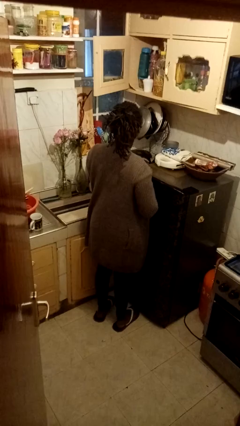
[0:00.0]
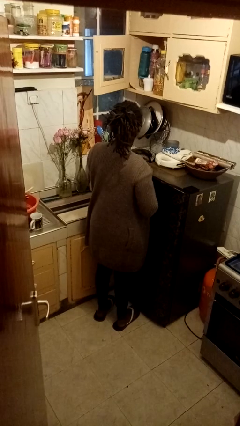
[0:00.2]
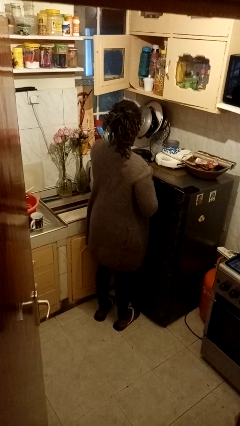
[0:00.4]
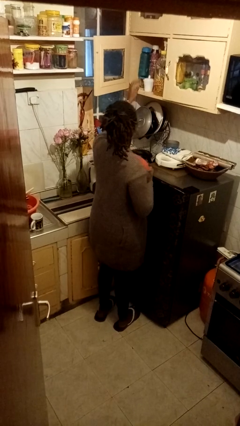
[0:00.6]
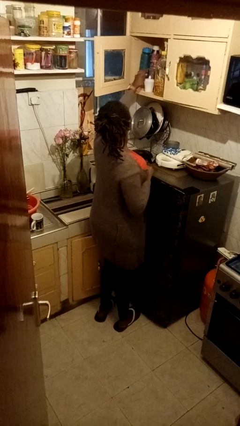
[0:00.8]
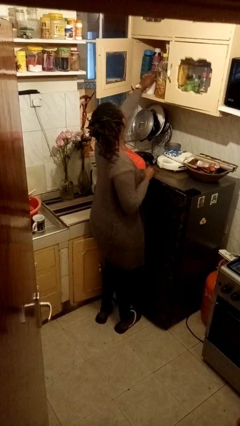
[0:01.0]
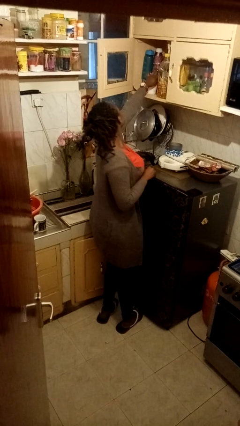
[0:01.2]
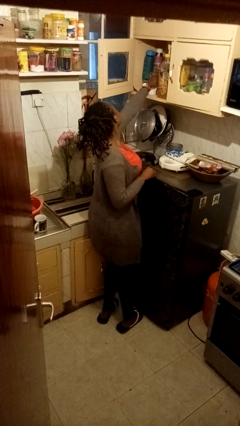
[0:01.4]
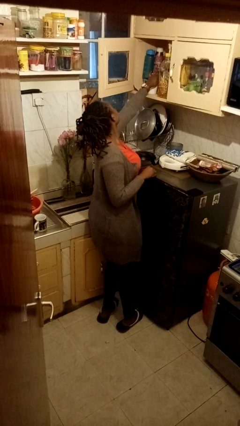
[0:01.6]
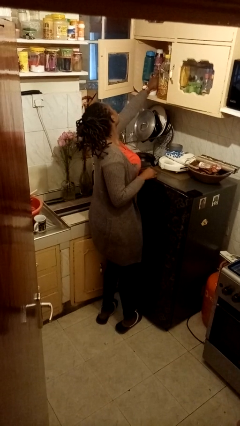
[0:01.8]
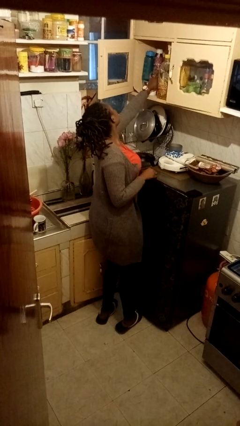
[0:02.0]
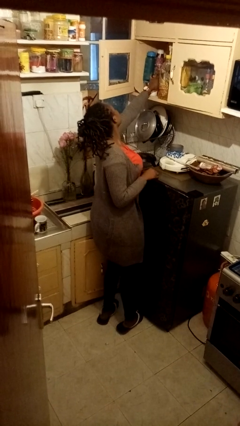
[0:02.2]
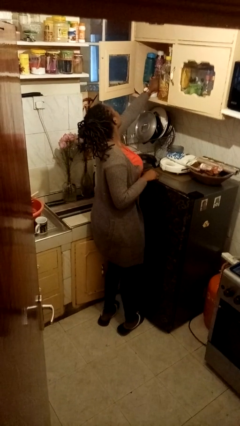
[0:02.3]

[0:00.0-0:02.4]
person searches in cabinet

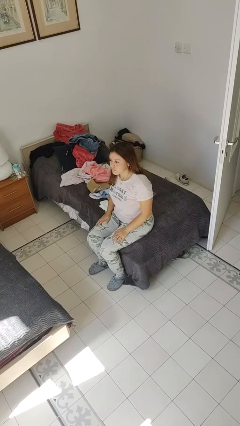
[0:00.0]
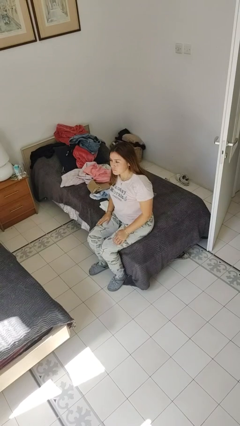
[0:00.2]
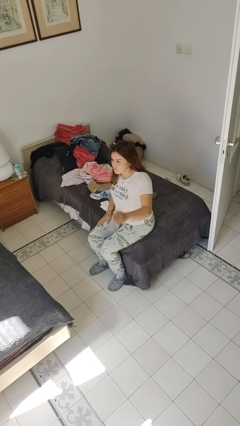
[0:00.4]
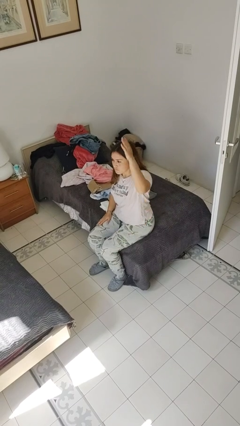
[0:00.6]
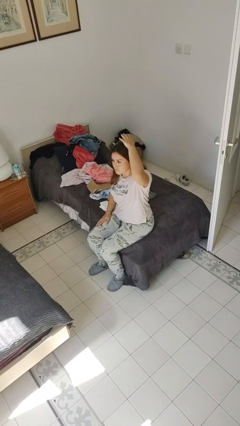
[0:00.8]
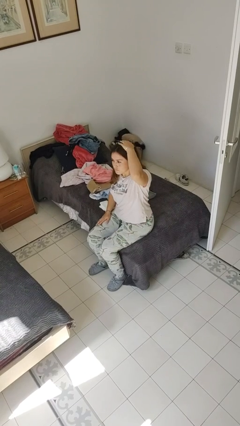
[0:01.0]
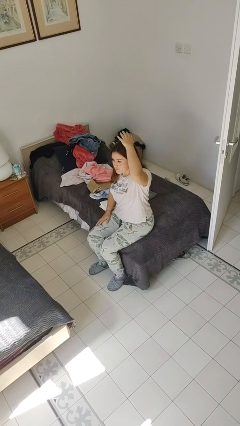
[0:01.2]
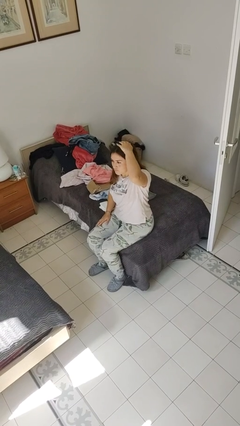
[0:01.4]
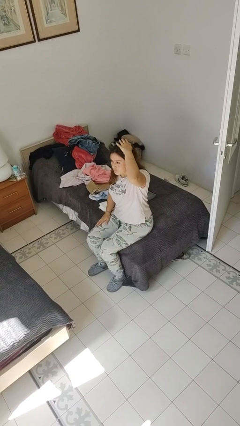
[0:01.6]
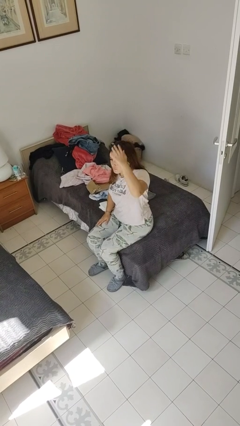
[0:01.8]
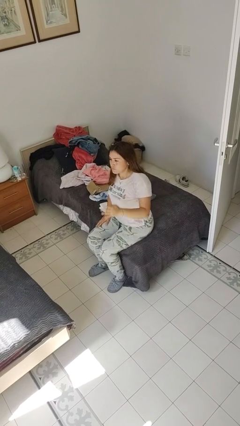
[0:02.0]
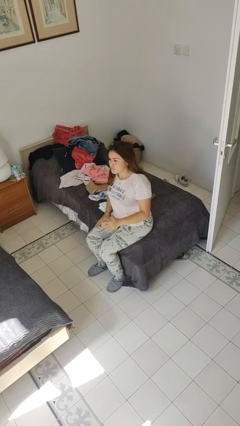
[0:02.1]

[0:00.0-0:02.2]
person pats head

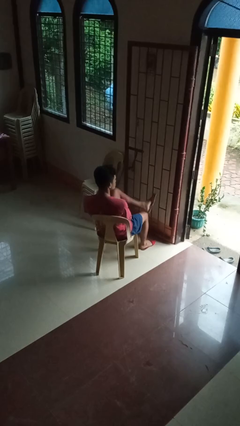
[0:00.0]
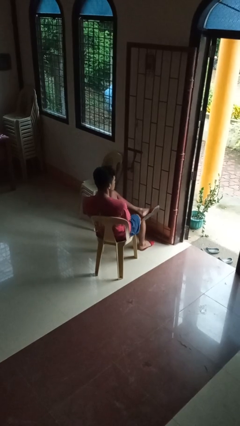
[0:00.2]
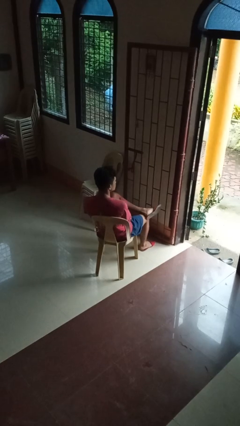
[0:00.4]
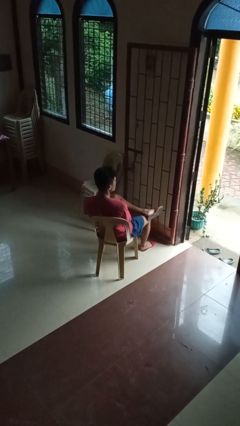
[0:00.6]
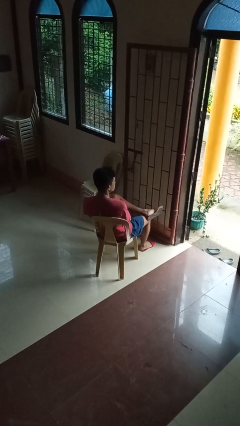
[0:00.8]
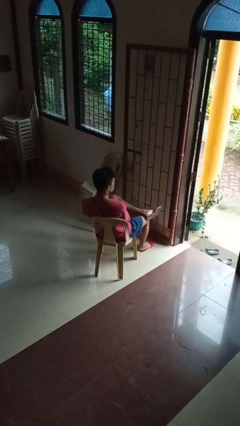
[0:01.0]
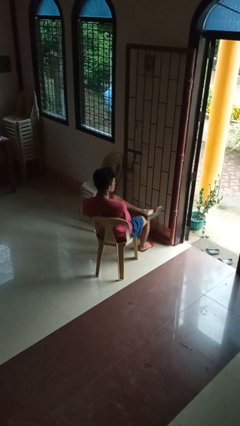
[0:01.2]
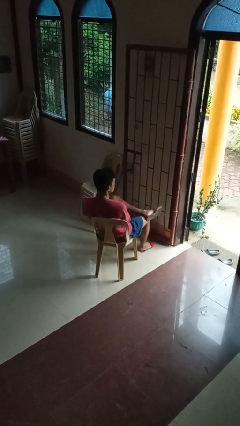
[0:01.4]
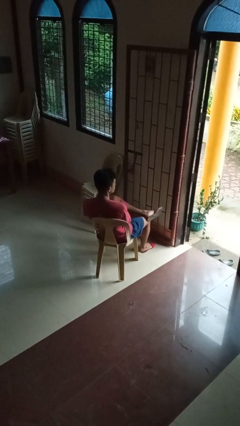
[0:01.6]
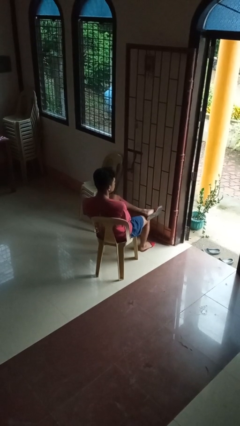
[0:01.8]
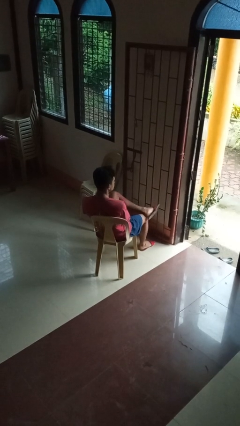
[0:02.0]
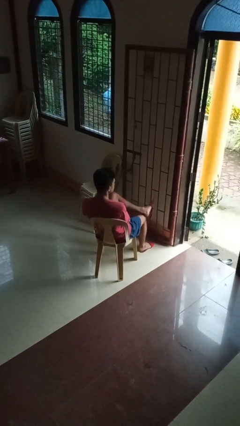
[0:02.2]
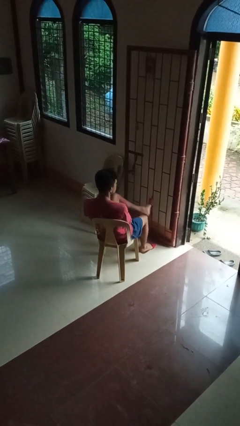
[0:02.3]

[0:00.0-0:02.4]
person crosses legs

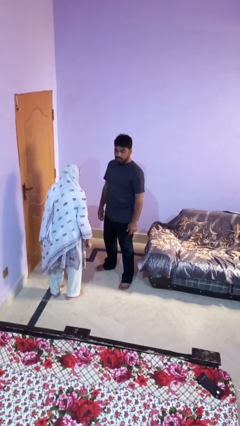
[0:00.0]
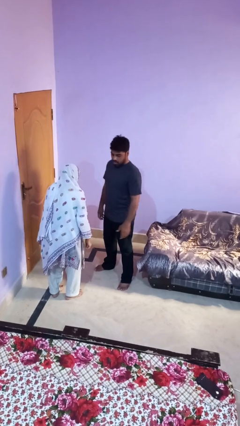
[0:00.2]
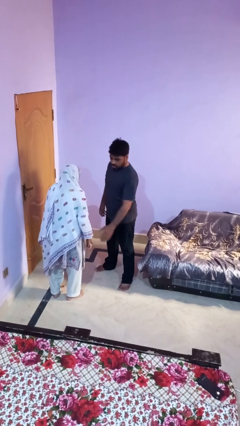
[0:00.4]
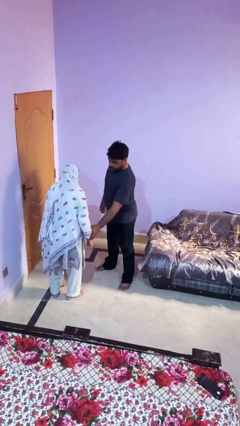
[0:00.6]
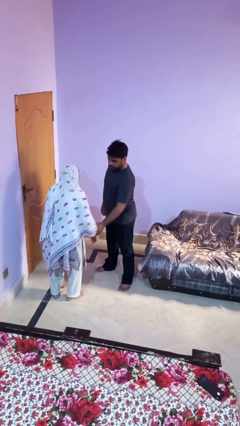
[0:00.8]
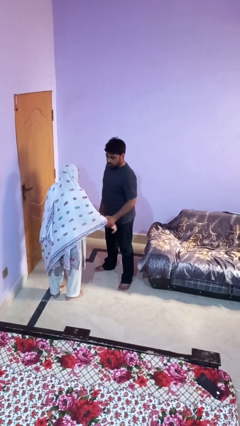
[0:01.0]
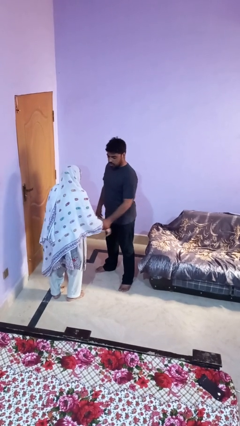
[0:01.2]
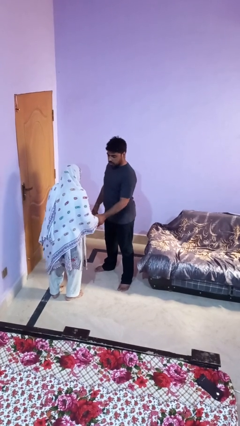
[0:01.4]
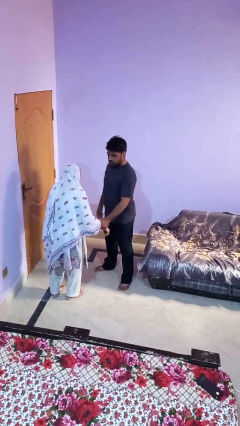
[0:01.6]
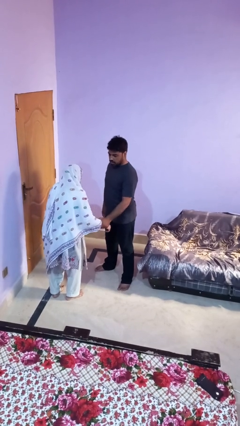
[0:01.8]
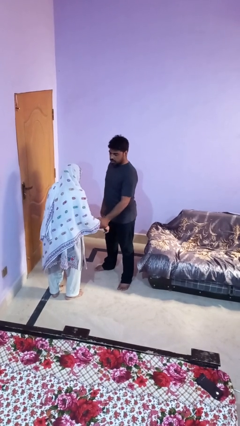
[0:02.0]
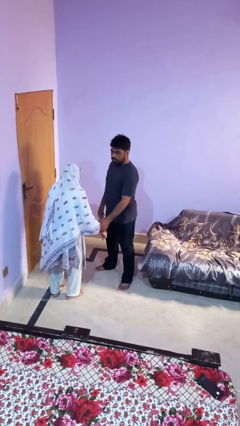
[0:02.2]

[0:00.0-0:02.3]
person grabs person by forearm

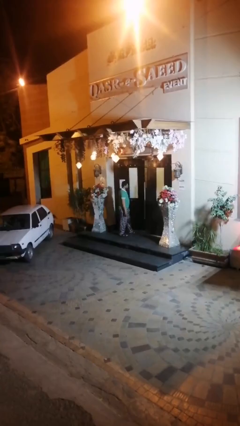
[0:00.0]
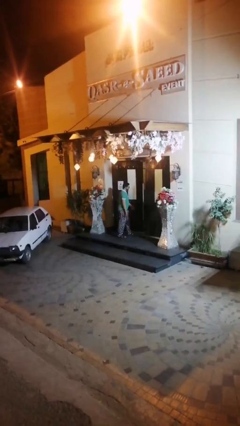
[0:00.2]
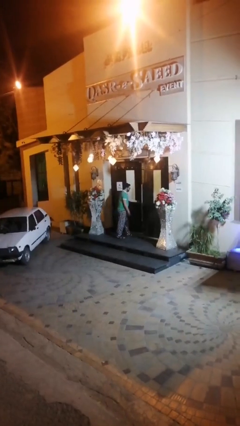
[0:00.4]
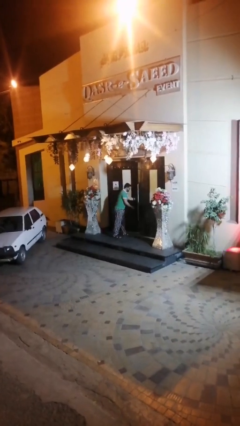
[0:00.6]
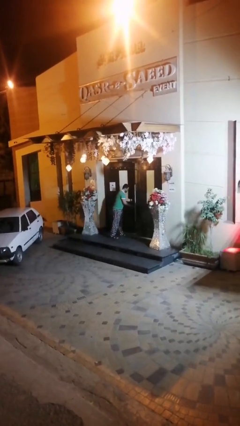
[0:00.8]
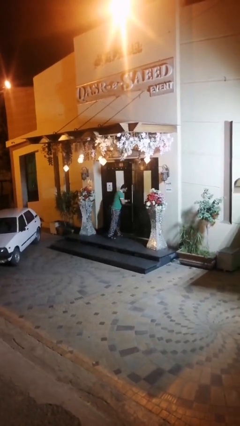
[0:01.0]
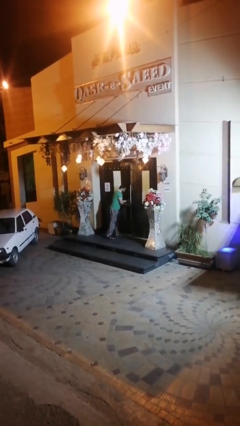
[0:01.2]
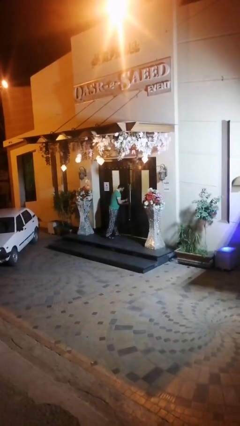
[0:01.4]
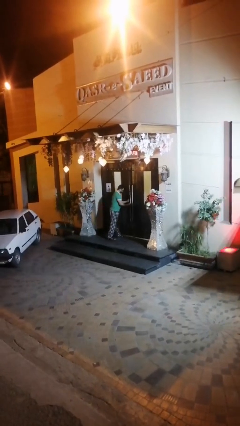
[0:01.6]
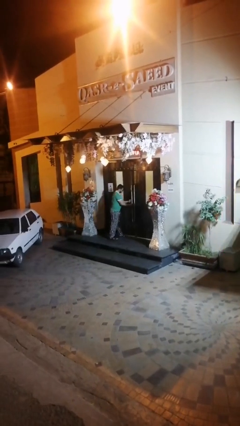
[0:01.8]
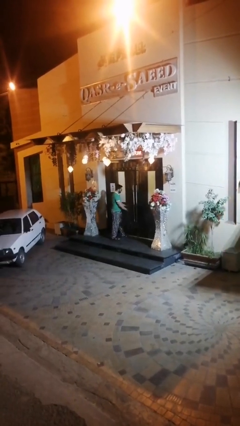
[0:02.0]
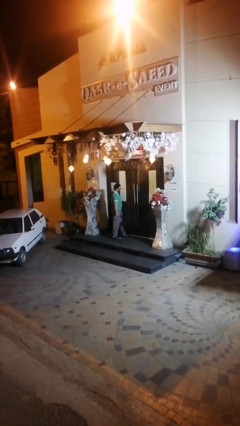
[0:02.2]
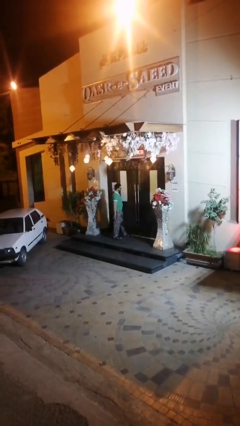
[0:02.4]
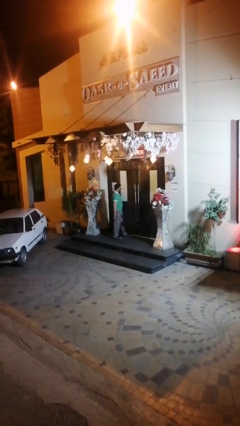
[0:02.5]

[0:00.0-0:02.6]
person closes facility door

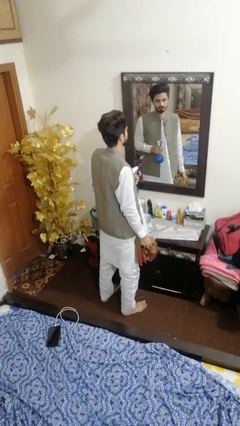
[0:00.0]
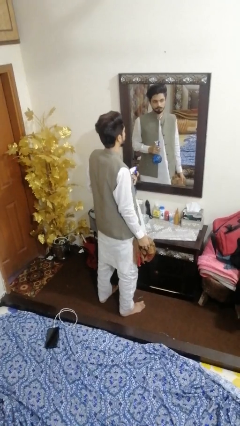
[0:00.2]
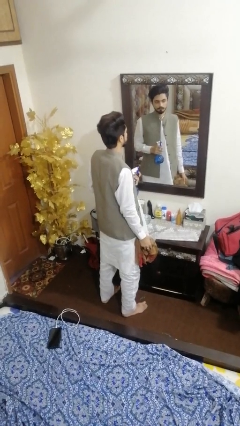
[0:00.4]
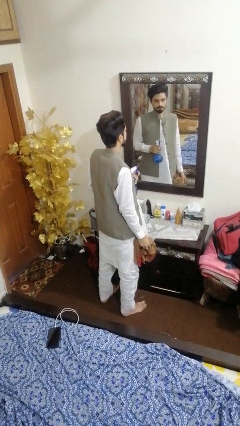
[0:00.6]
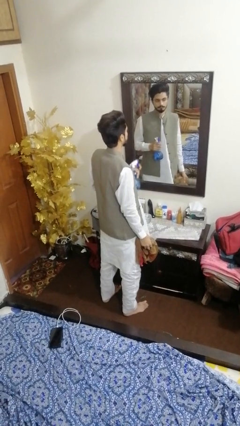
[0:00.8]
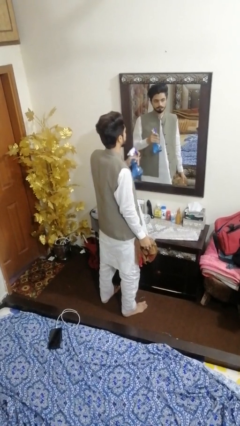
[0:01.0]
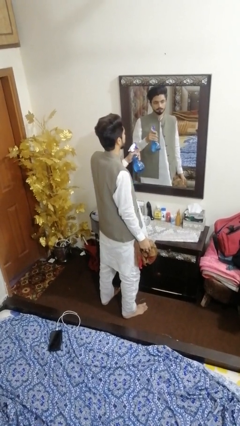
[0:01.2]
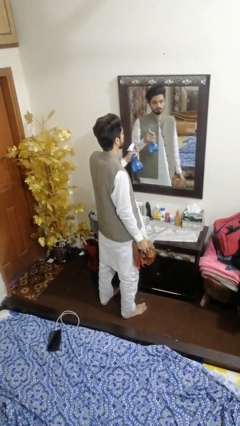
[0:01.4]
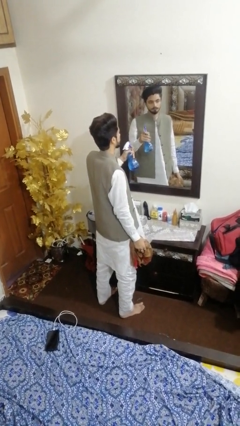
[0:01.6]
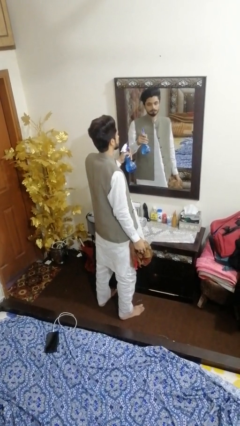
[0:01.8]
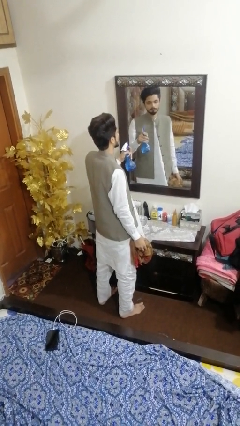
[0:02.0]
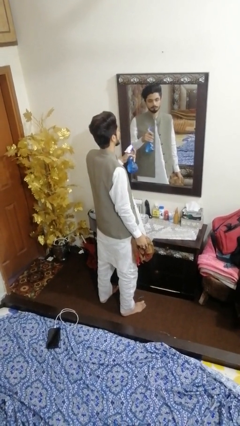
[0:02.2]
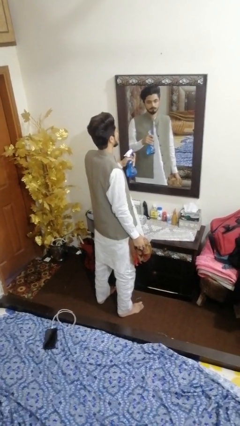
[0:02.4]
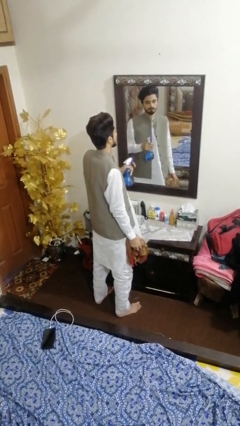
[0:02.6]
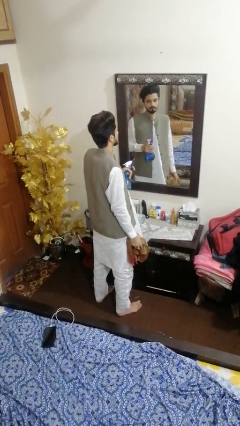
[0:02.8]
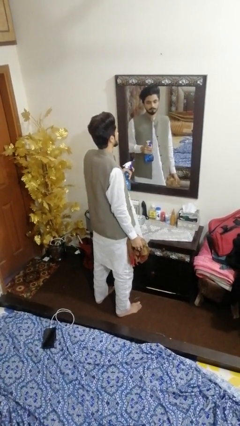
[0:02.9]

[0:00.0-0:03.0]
person sprays from bottle

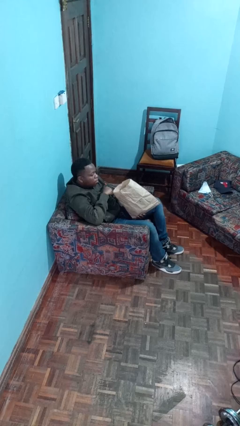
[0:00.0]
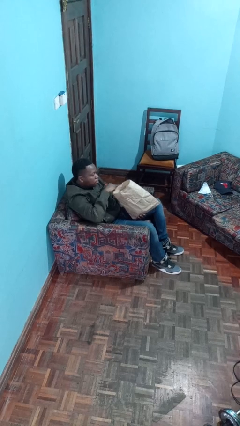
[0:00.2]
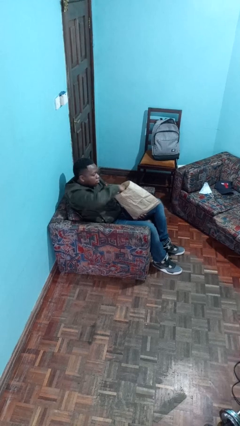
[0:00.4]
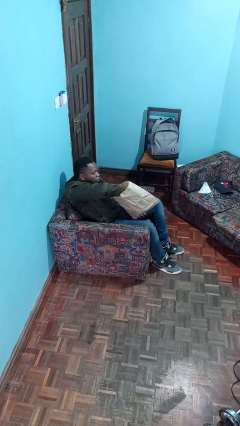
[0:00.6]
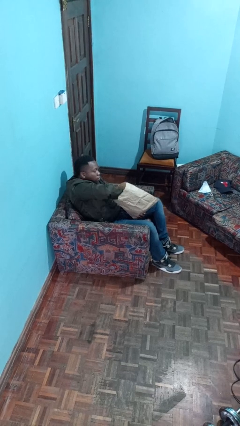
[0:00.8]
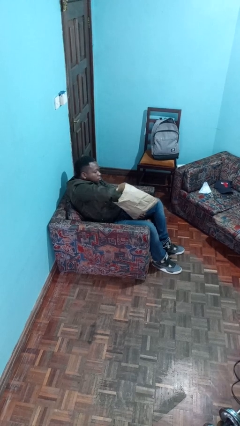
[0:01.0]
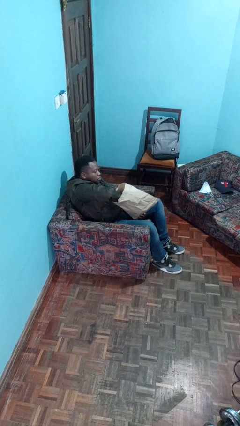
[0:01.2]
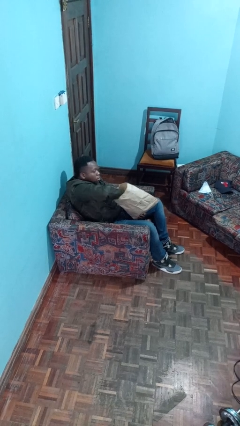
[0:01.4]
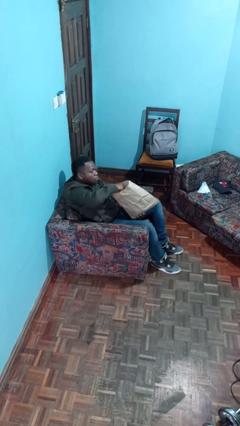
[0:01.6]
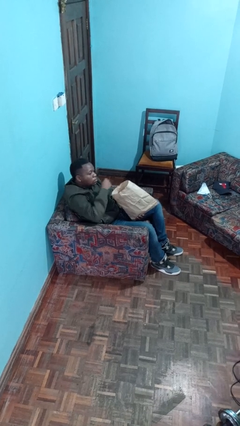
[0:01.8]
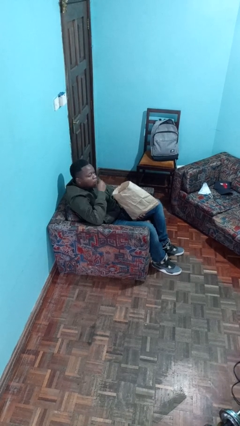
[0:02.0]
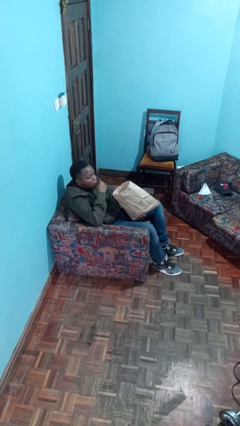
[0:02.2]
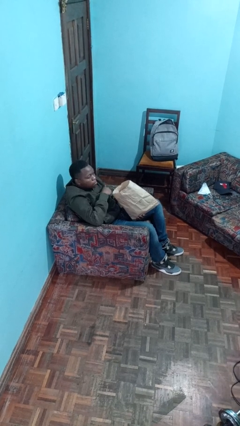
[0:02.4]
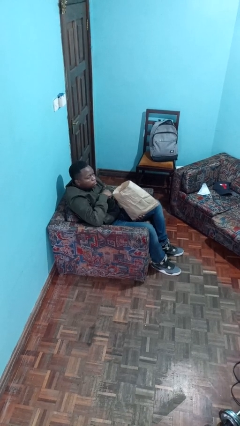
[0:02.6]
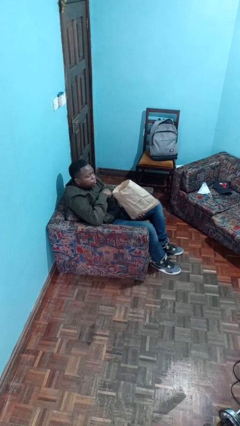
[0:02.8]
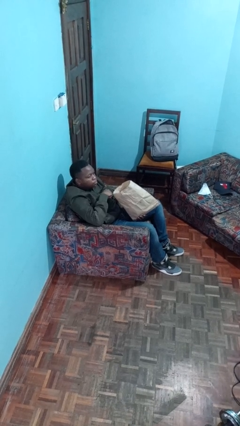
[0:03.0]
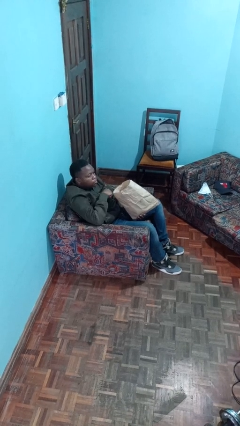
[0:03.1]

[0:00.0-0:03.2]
person eats snack from bag
